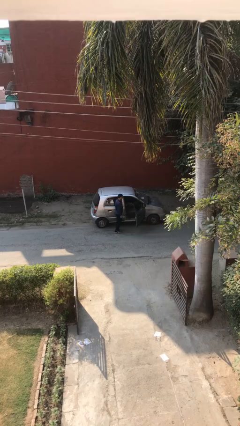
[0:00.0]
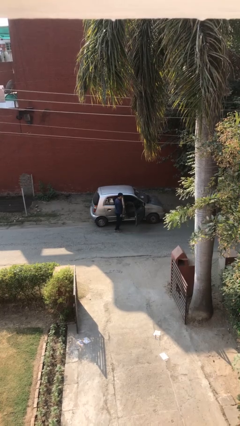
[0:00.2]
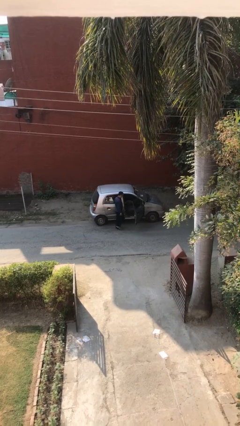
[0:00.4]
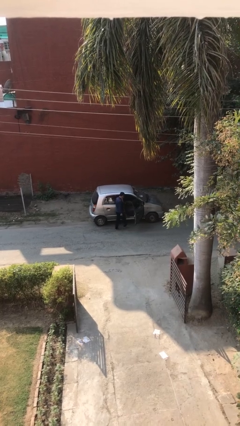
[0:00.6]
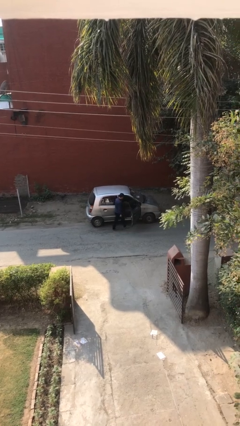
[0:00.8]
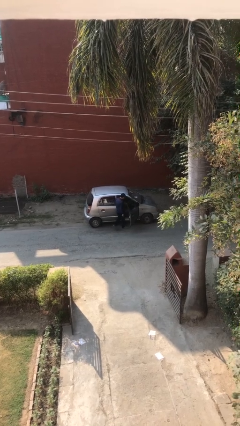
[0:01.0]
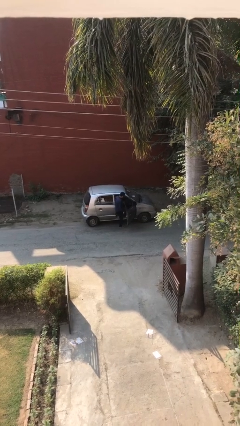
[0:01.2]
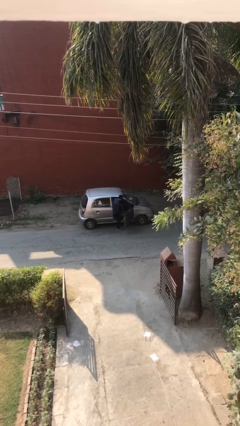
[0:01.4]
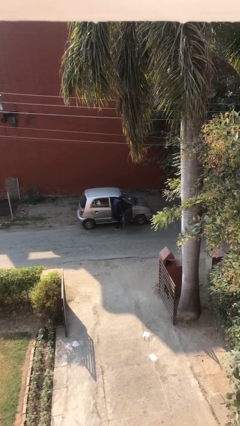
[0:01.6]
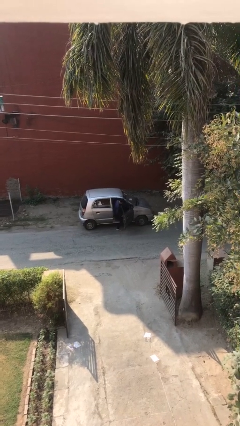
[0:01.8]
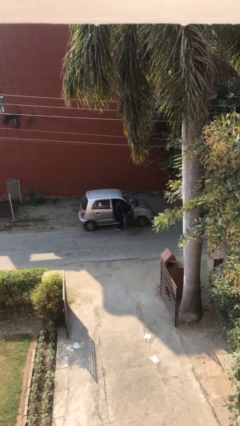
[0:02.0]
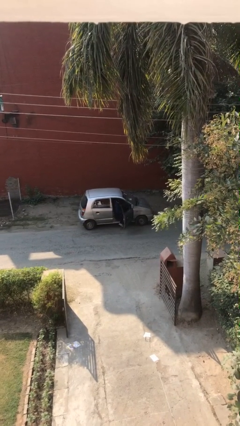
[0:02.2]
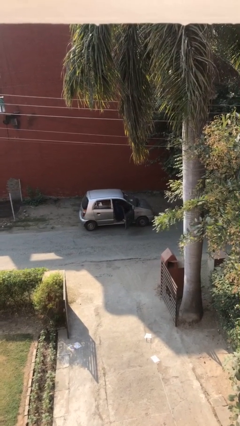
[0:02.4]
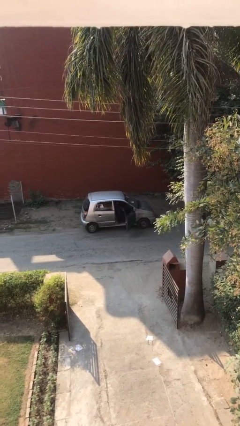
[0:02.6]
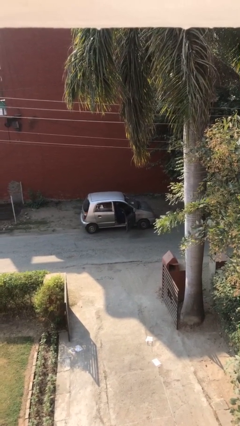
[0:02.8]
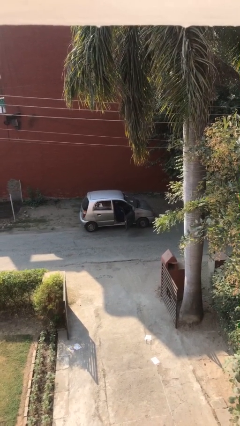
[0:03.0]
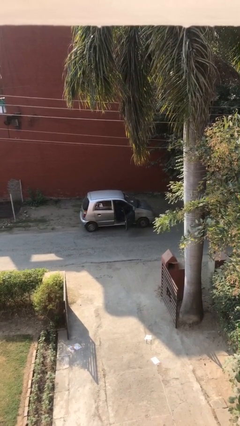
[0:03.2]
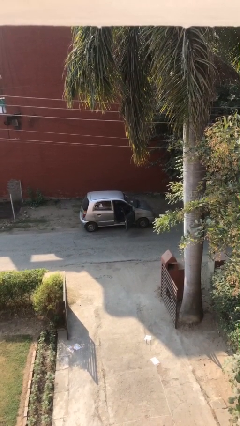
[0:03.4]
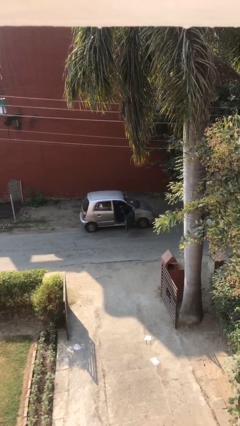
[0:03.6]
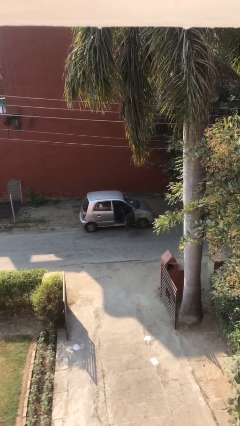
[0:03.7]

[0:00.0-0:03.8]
person enters car

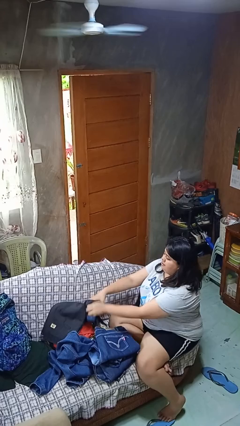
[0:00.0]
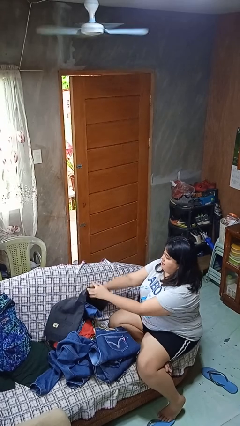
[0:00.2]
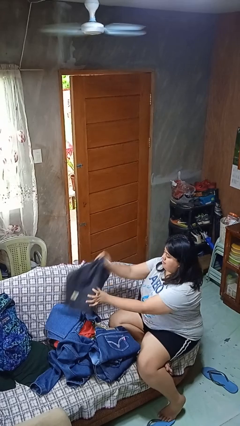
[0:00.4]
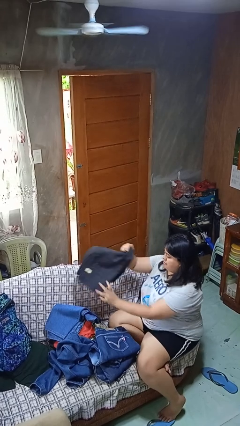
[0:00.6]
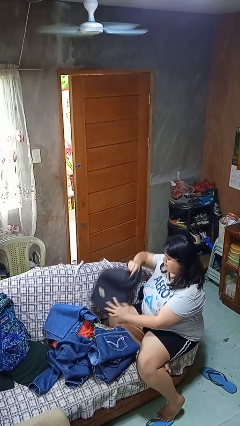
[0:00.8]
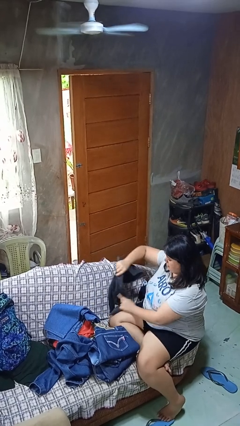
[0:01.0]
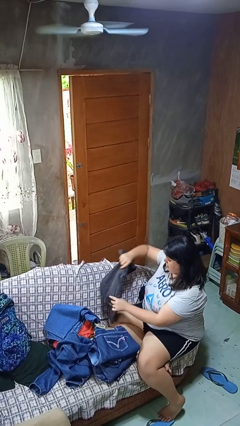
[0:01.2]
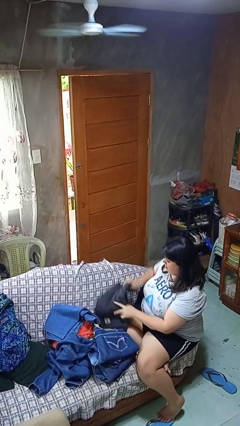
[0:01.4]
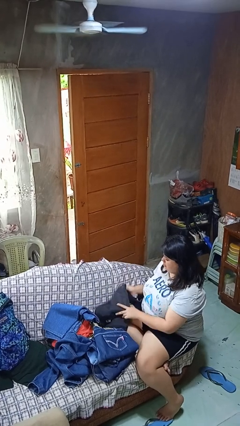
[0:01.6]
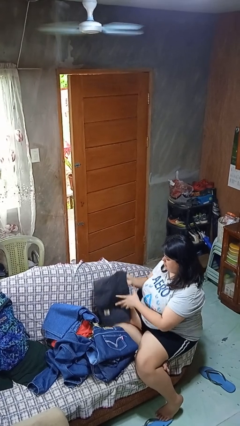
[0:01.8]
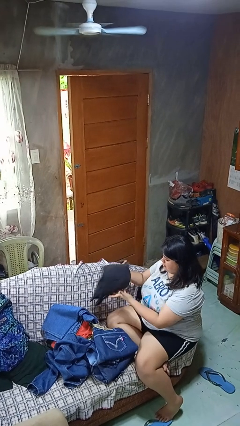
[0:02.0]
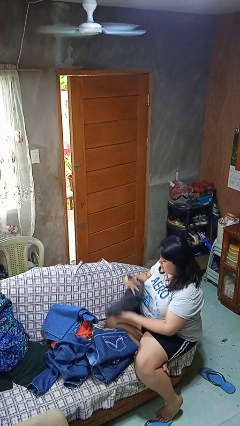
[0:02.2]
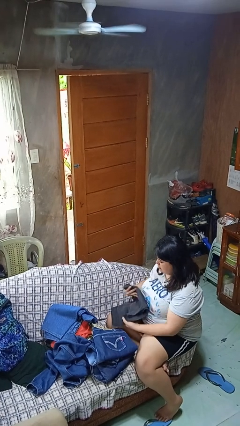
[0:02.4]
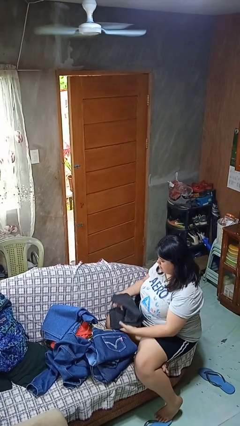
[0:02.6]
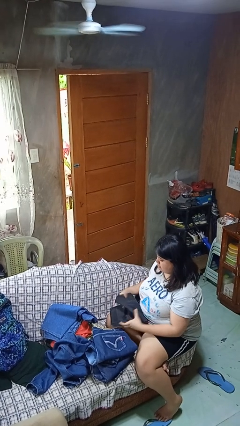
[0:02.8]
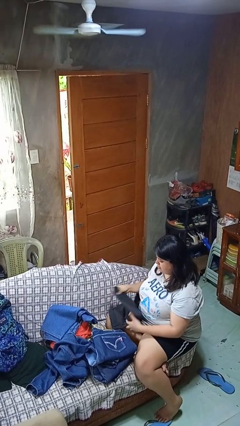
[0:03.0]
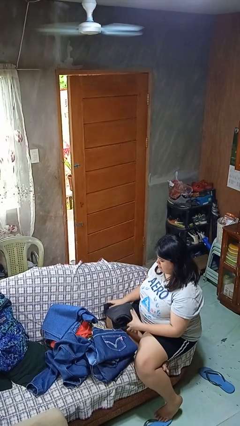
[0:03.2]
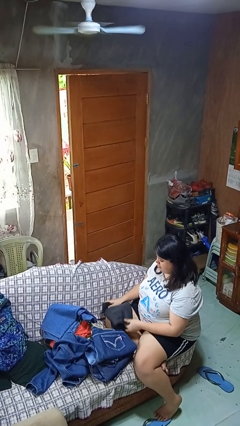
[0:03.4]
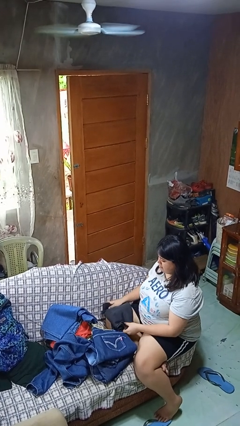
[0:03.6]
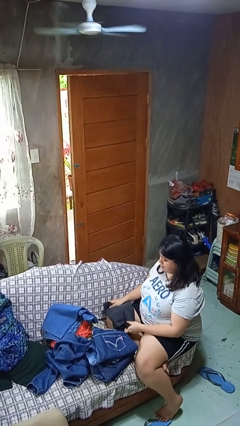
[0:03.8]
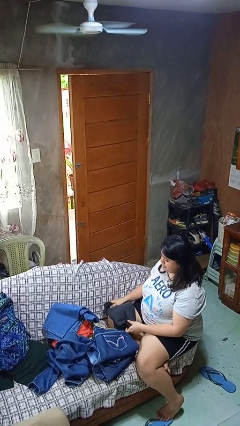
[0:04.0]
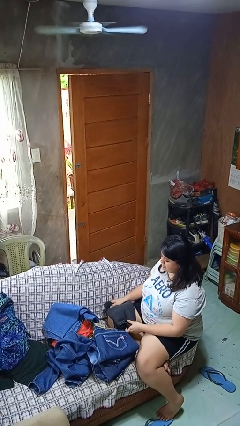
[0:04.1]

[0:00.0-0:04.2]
person folds pants

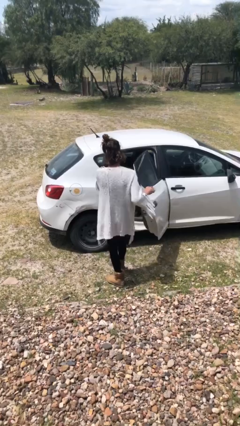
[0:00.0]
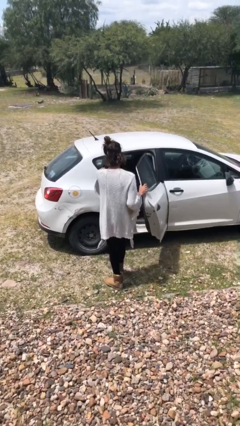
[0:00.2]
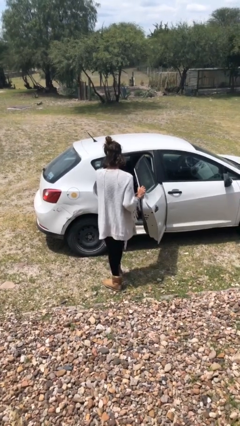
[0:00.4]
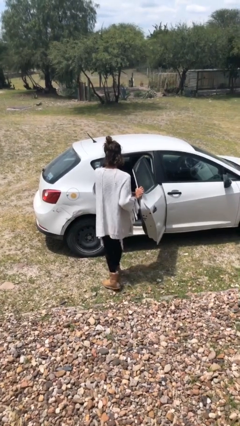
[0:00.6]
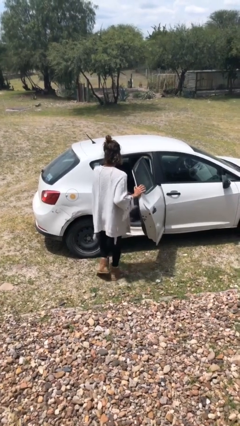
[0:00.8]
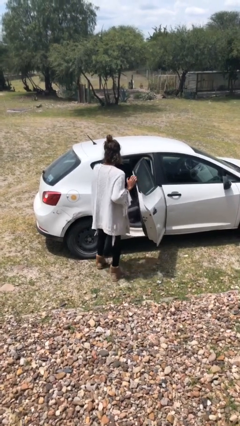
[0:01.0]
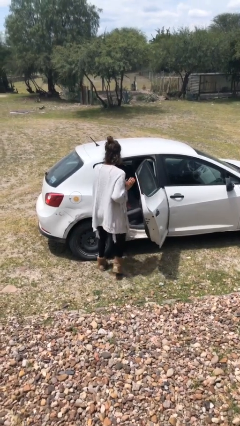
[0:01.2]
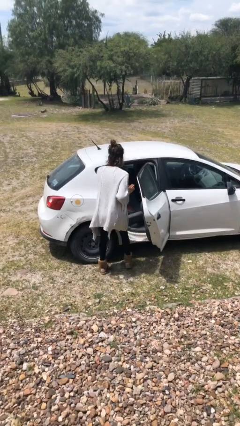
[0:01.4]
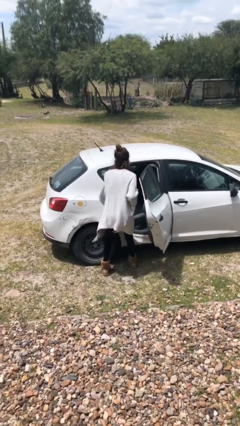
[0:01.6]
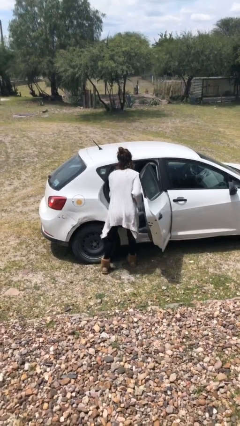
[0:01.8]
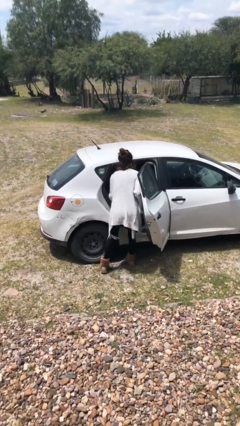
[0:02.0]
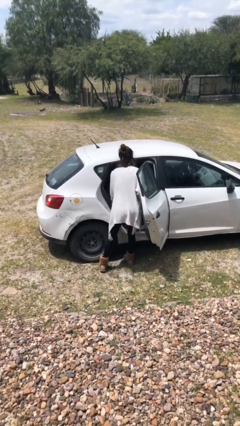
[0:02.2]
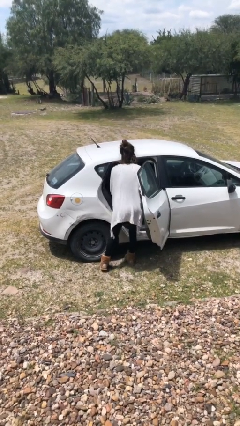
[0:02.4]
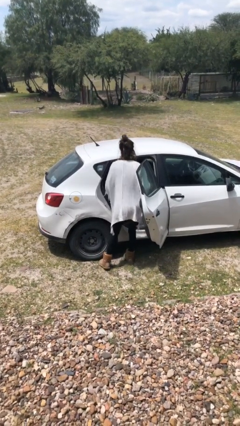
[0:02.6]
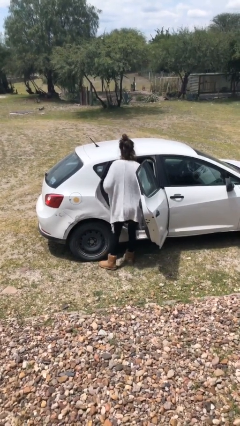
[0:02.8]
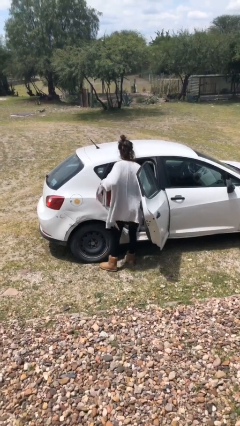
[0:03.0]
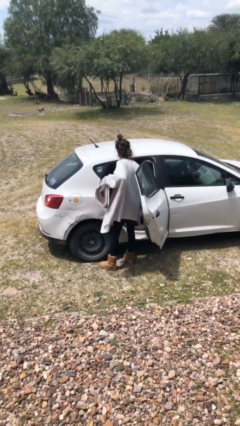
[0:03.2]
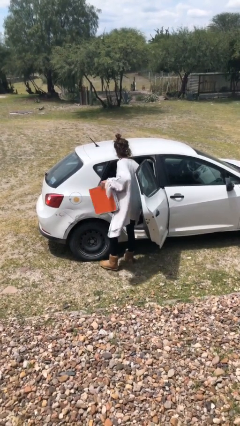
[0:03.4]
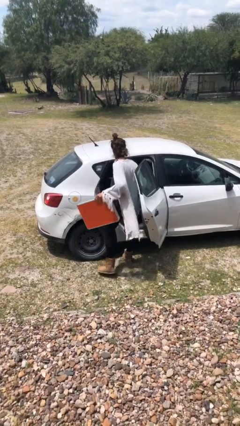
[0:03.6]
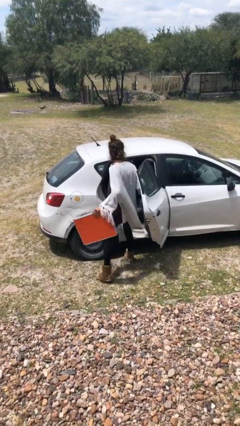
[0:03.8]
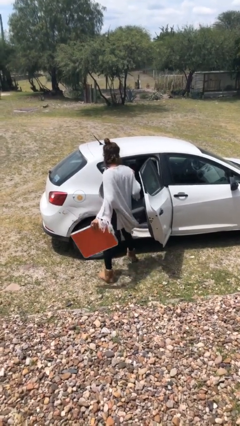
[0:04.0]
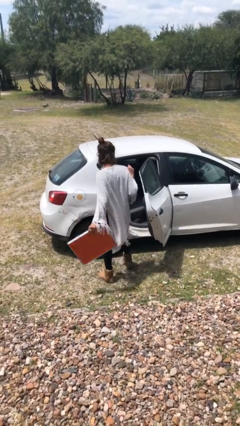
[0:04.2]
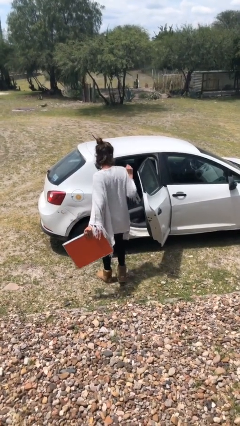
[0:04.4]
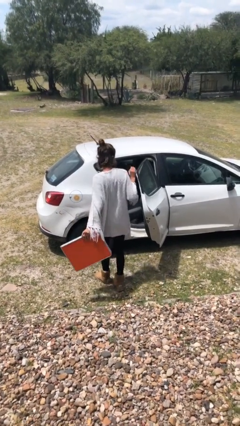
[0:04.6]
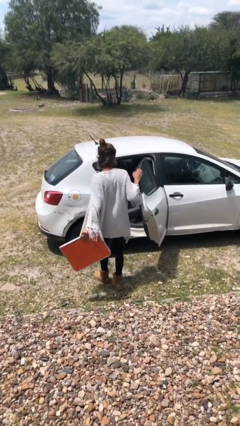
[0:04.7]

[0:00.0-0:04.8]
person unloads car

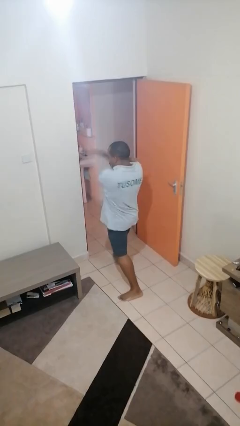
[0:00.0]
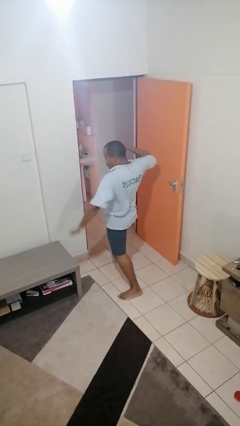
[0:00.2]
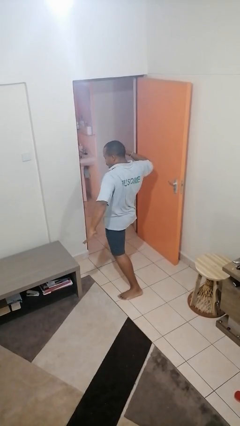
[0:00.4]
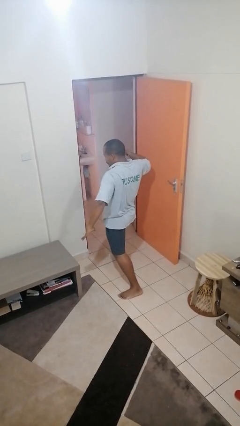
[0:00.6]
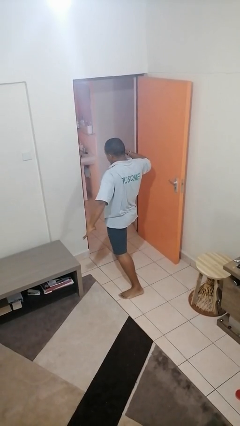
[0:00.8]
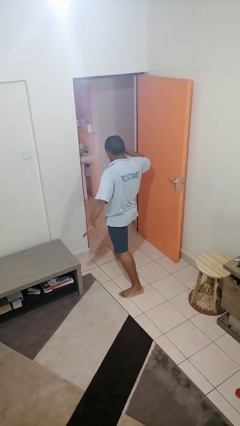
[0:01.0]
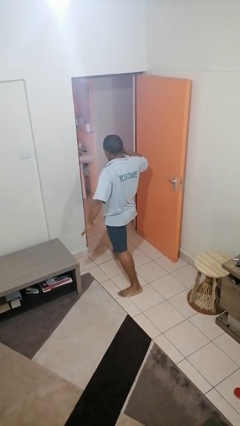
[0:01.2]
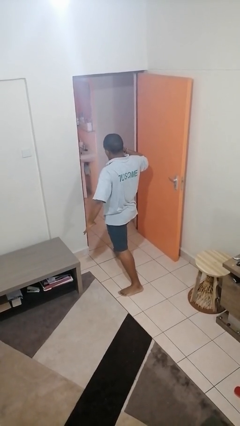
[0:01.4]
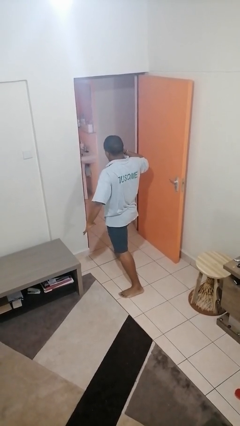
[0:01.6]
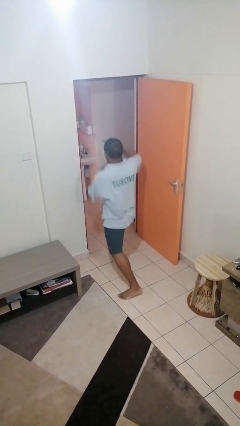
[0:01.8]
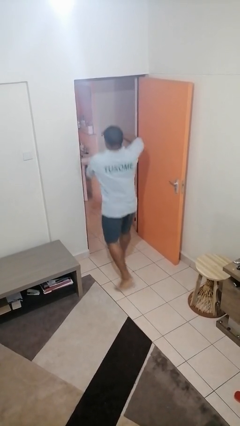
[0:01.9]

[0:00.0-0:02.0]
person karate chop

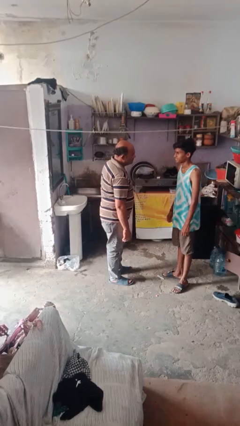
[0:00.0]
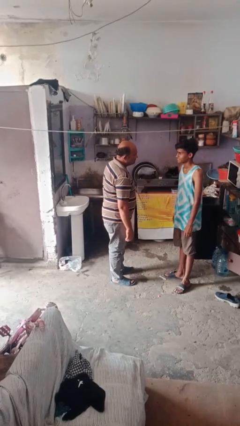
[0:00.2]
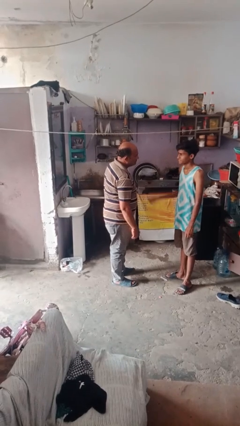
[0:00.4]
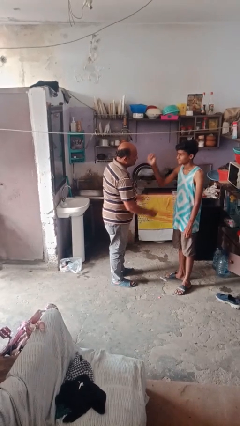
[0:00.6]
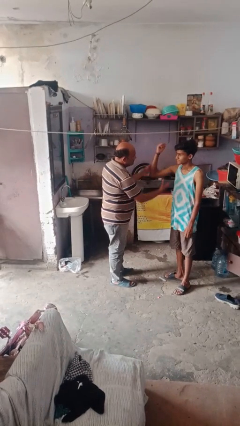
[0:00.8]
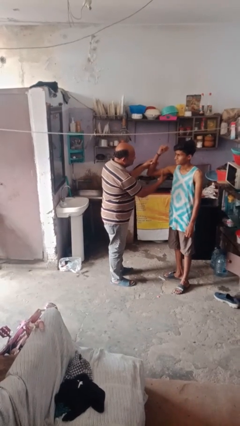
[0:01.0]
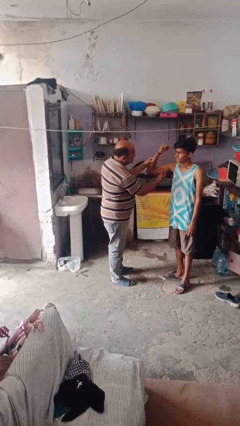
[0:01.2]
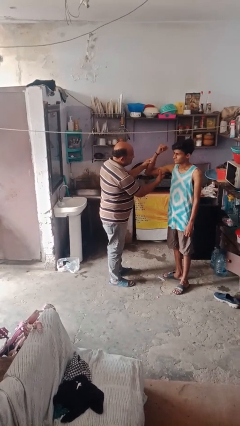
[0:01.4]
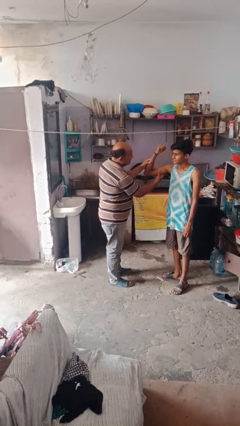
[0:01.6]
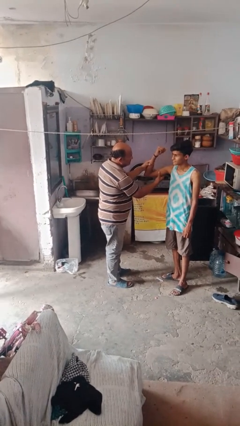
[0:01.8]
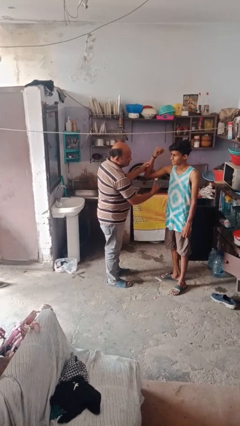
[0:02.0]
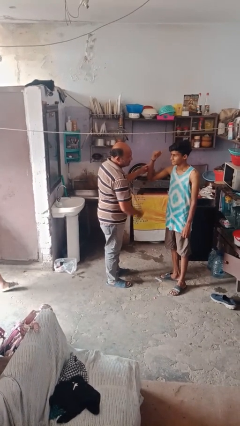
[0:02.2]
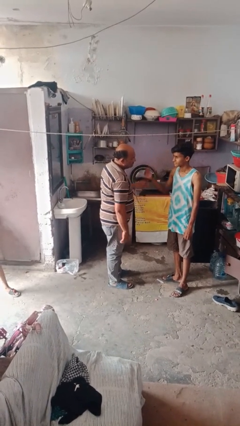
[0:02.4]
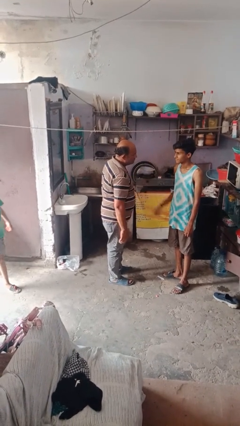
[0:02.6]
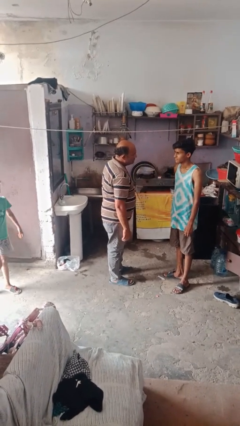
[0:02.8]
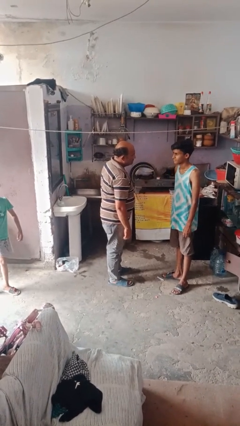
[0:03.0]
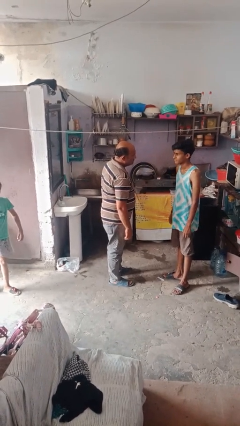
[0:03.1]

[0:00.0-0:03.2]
person grabs person by bicep

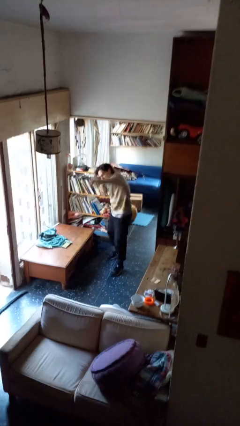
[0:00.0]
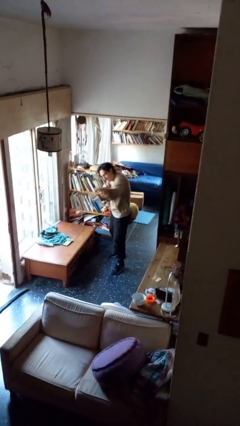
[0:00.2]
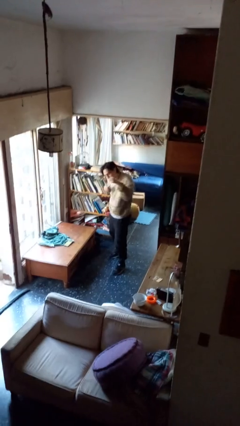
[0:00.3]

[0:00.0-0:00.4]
person punches
